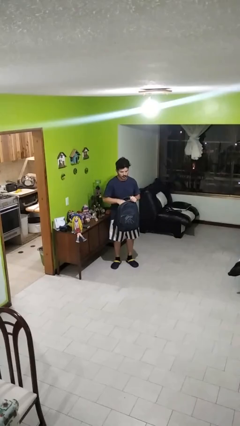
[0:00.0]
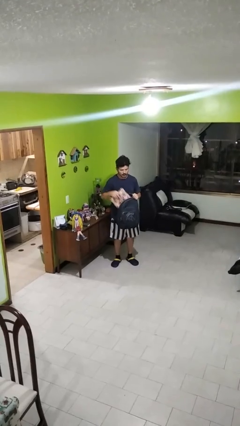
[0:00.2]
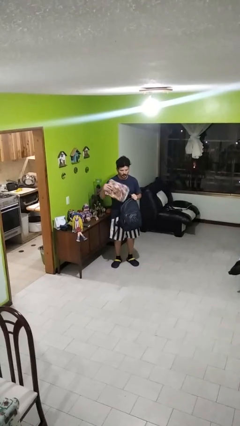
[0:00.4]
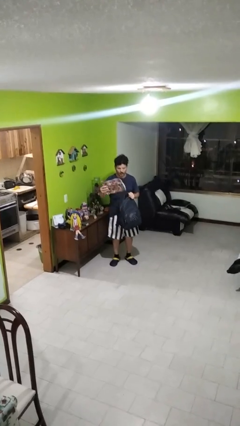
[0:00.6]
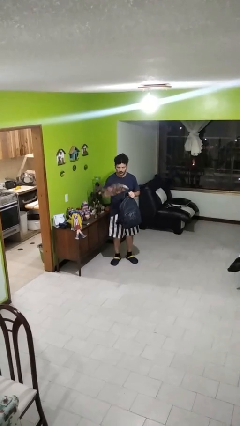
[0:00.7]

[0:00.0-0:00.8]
person takes object from backpack

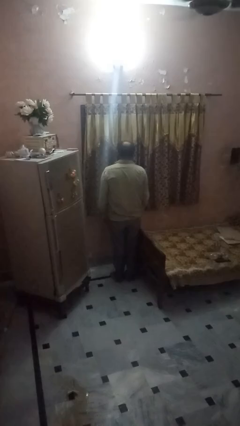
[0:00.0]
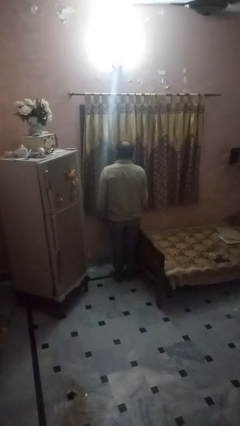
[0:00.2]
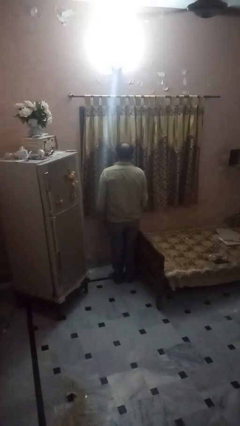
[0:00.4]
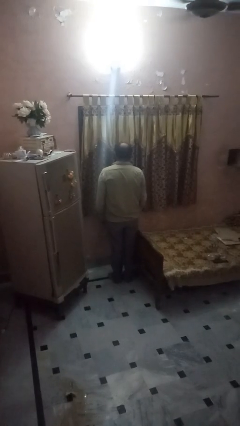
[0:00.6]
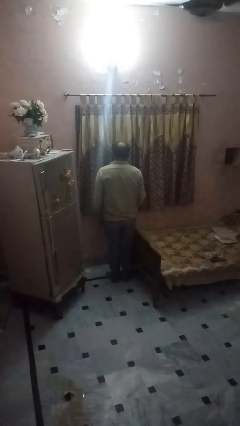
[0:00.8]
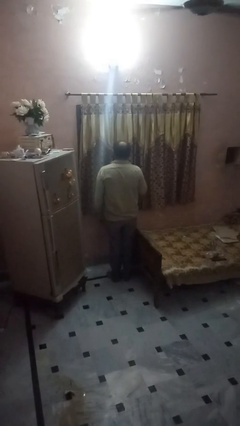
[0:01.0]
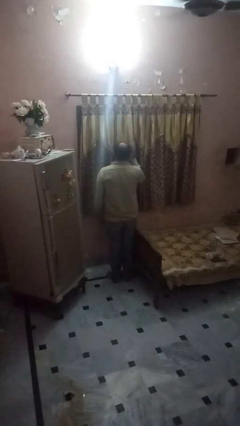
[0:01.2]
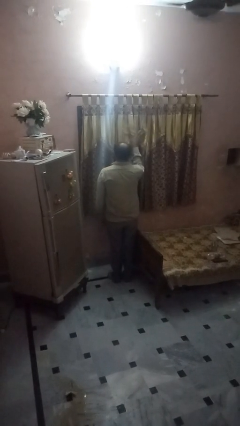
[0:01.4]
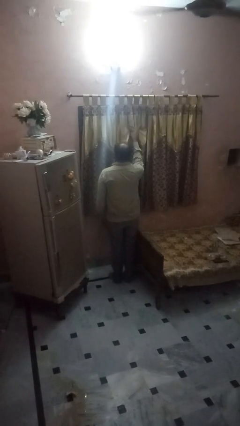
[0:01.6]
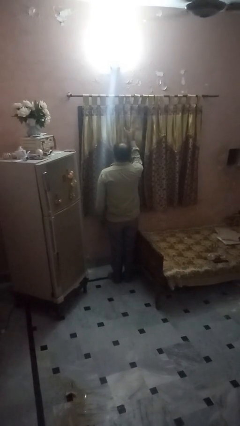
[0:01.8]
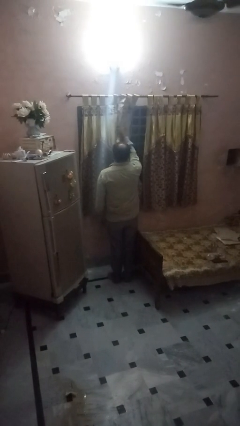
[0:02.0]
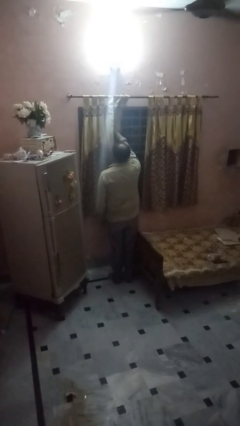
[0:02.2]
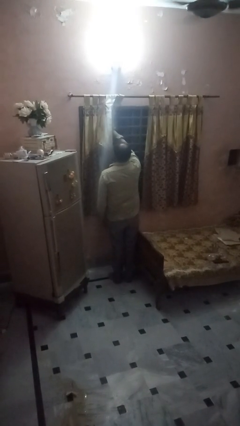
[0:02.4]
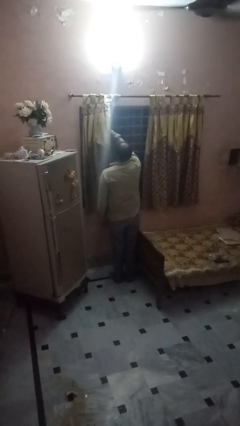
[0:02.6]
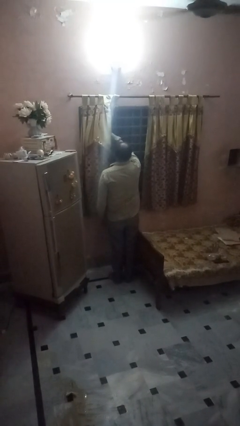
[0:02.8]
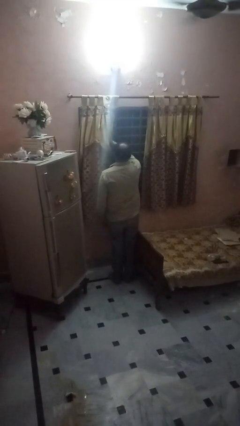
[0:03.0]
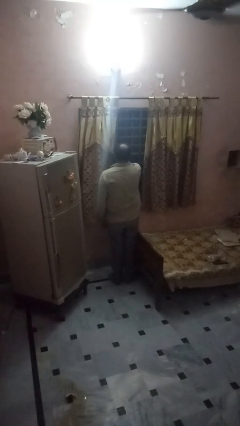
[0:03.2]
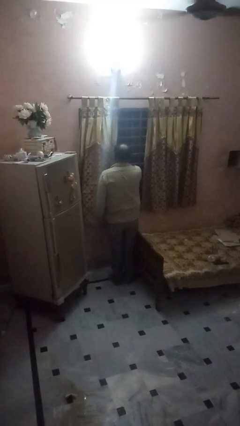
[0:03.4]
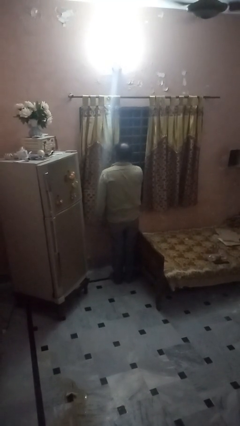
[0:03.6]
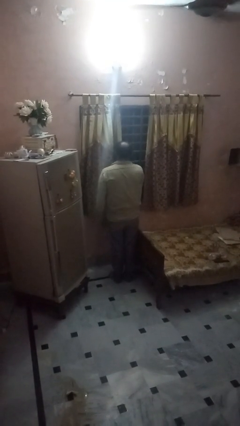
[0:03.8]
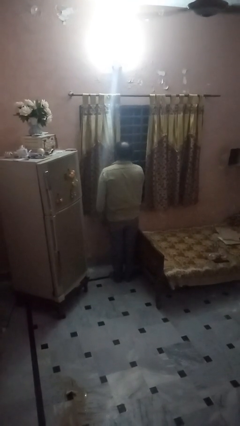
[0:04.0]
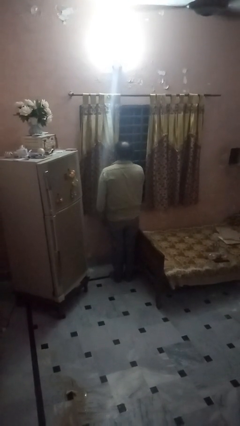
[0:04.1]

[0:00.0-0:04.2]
person opens curtains

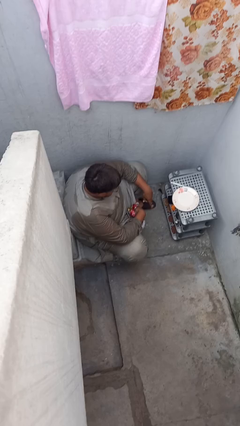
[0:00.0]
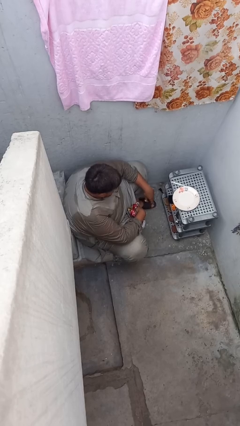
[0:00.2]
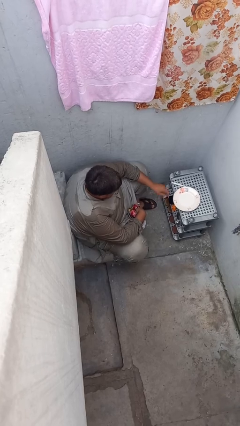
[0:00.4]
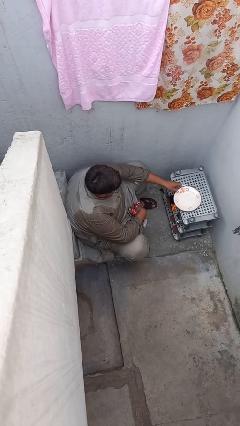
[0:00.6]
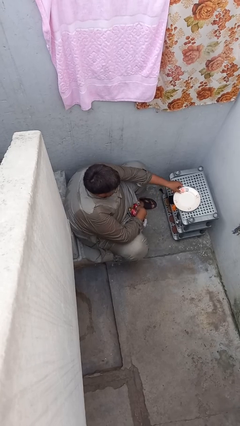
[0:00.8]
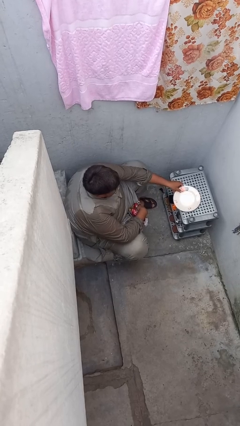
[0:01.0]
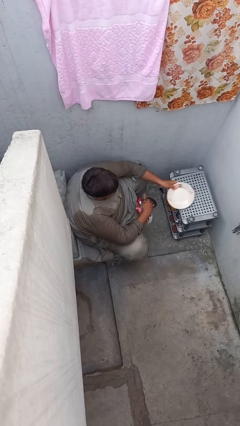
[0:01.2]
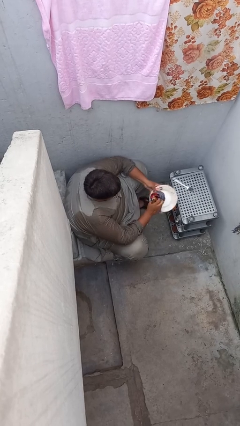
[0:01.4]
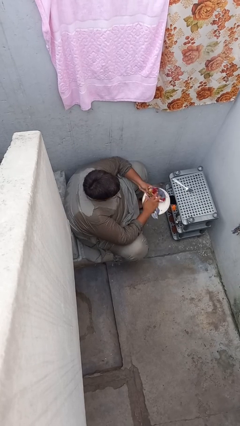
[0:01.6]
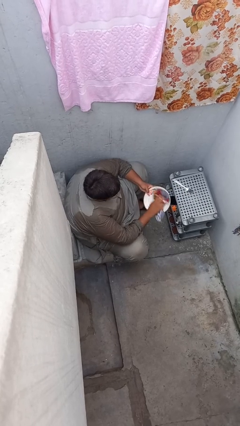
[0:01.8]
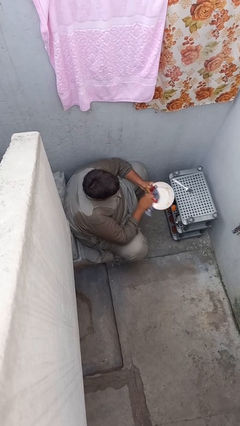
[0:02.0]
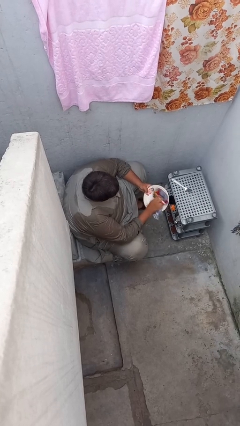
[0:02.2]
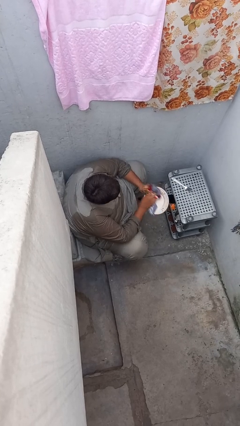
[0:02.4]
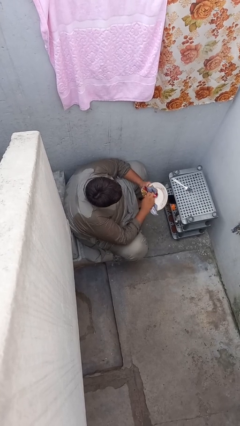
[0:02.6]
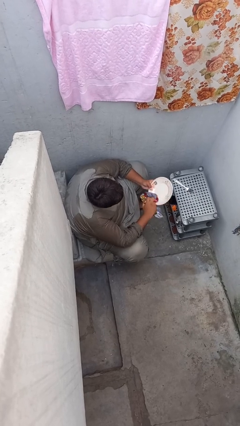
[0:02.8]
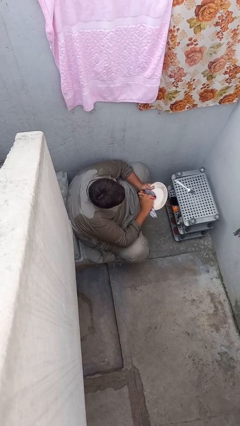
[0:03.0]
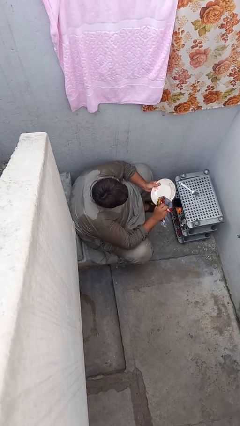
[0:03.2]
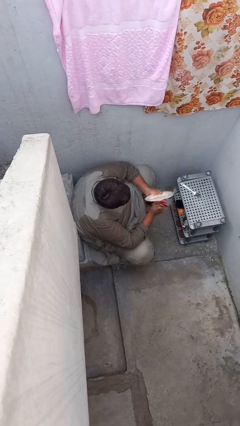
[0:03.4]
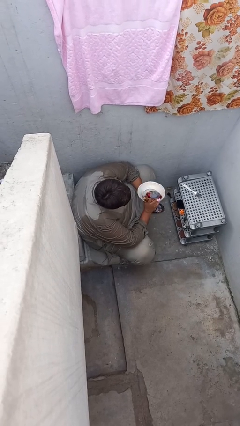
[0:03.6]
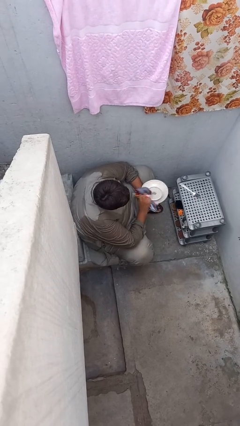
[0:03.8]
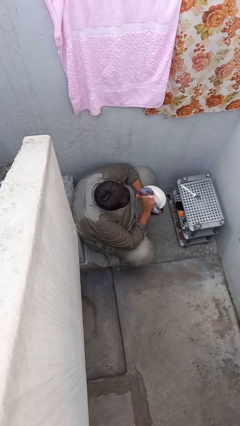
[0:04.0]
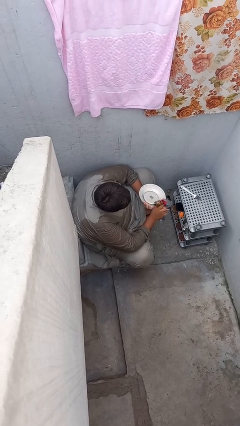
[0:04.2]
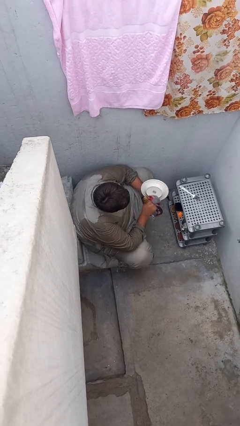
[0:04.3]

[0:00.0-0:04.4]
person dries dish

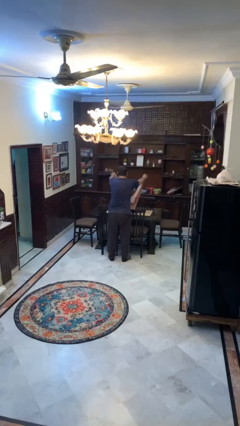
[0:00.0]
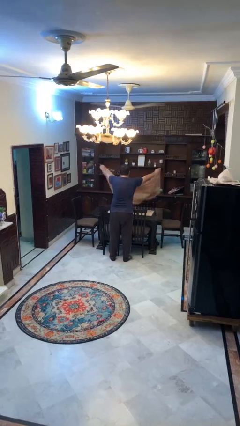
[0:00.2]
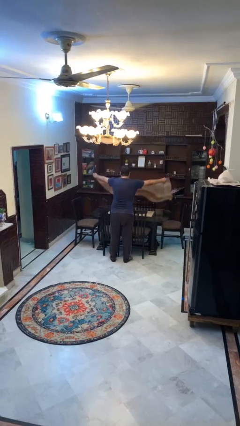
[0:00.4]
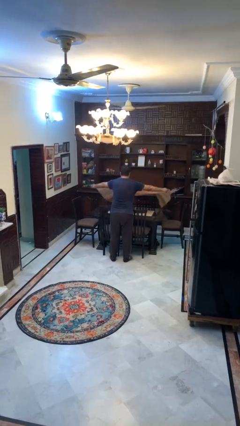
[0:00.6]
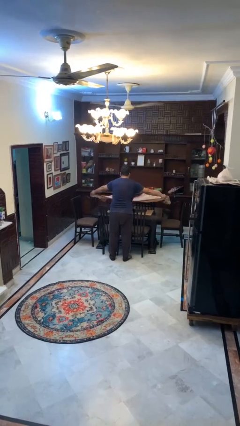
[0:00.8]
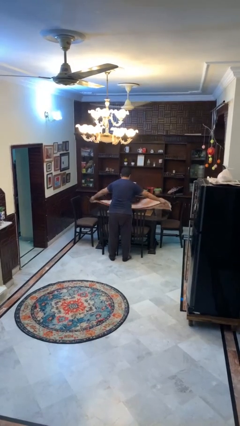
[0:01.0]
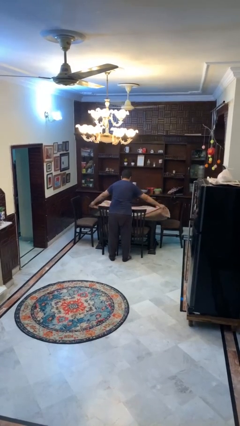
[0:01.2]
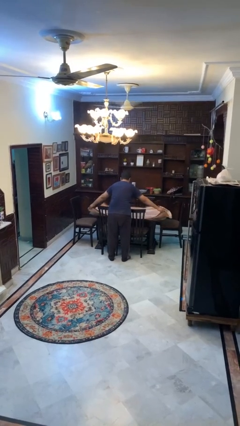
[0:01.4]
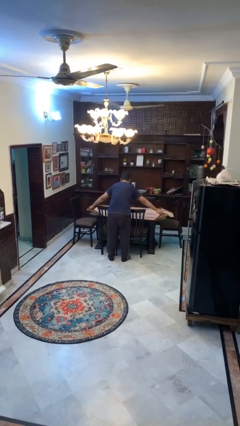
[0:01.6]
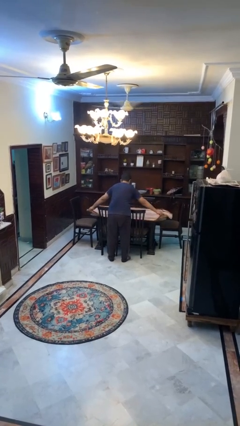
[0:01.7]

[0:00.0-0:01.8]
person spreads tablecloth

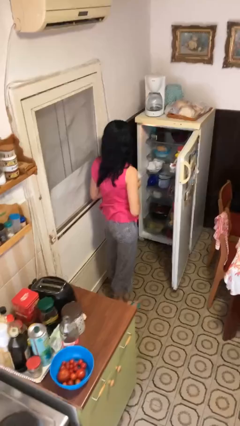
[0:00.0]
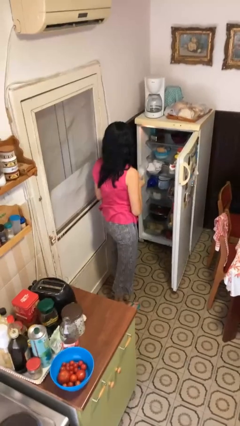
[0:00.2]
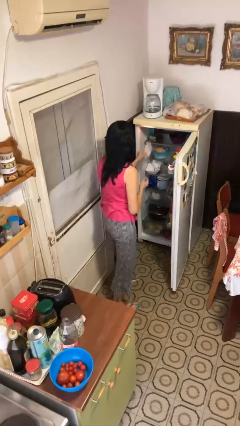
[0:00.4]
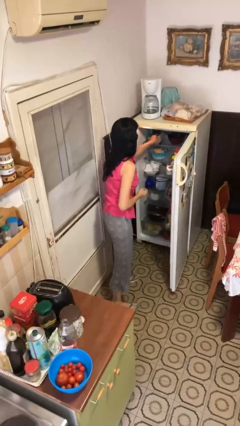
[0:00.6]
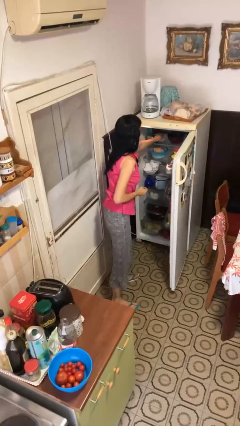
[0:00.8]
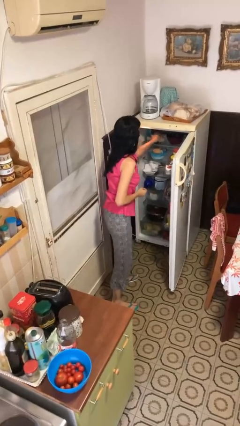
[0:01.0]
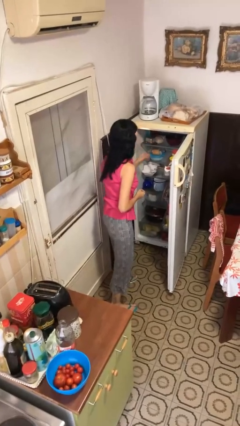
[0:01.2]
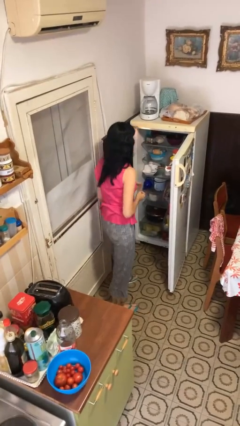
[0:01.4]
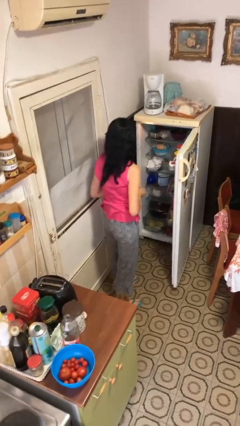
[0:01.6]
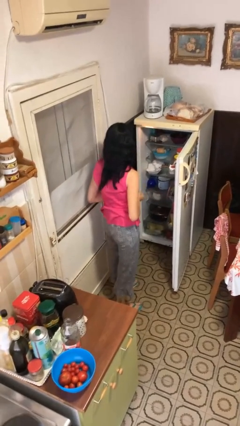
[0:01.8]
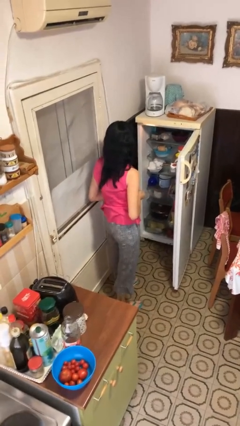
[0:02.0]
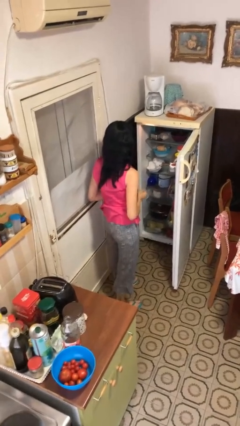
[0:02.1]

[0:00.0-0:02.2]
person puts object into refrigerator

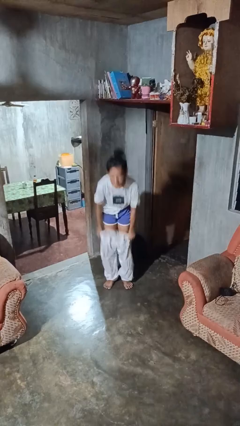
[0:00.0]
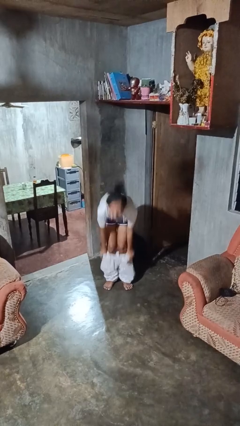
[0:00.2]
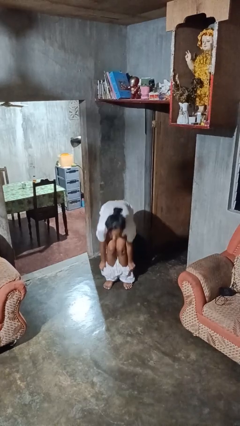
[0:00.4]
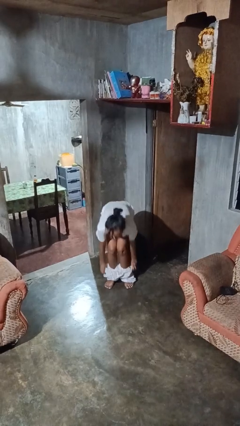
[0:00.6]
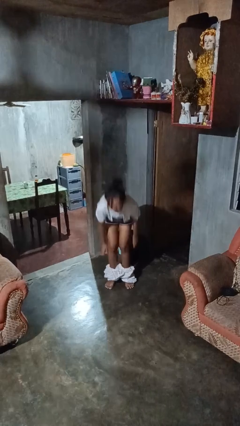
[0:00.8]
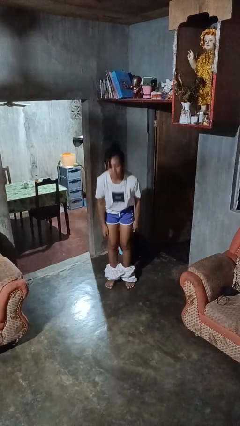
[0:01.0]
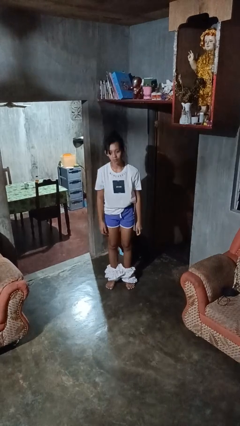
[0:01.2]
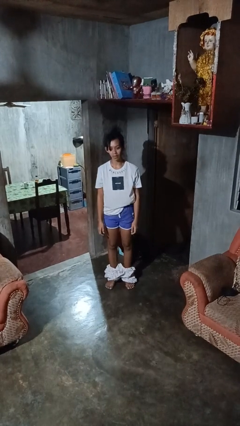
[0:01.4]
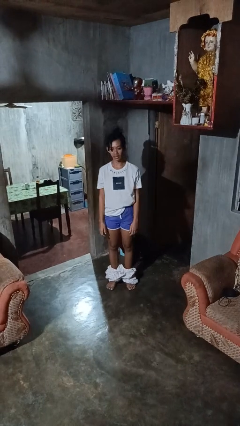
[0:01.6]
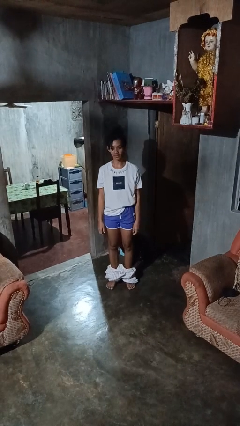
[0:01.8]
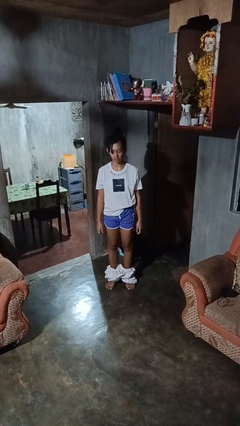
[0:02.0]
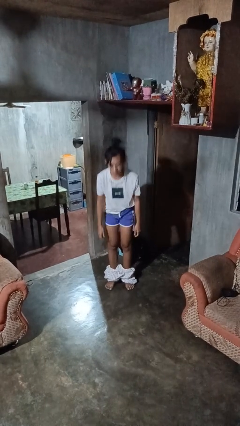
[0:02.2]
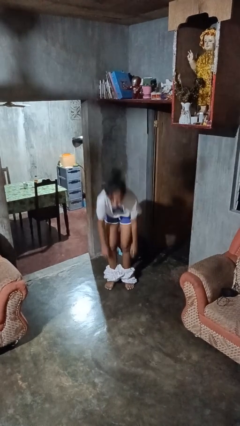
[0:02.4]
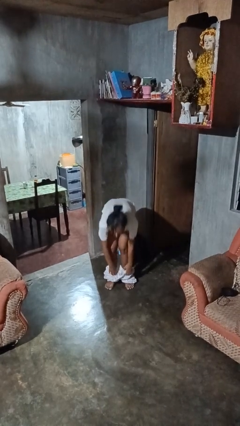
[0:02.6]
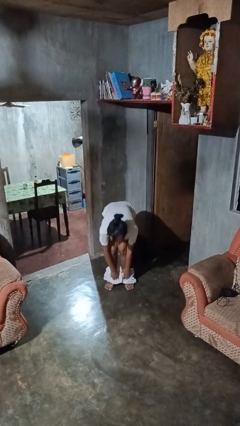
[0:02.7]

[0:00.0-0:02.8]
person takes off pants

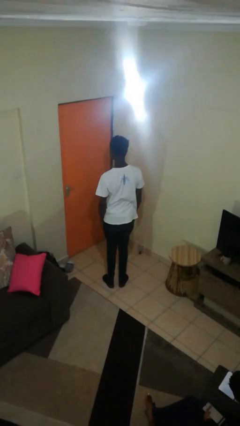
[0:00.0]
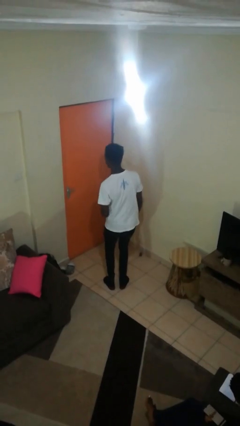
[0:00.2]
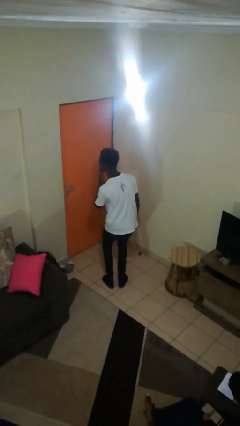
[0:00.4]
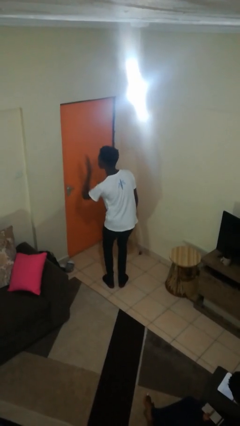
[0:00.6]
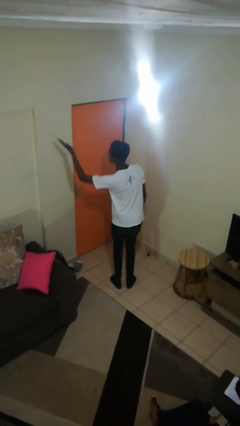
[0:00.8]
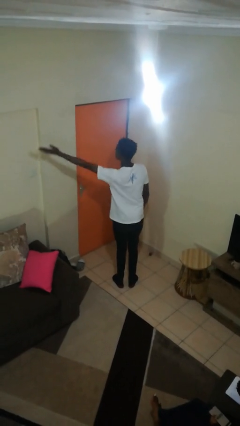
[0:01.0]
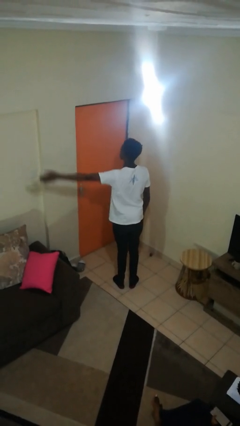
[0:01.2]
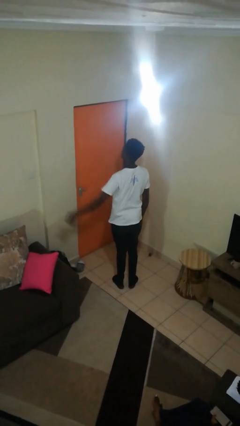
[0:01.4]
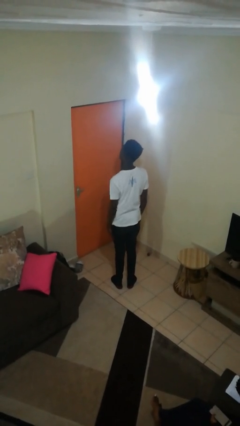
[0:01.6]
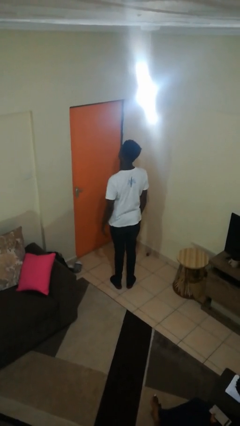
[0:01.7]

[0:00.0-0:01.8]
person gestures blow kiss
